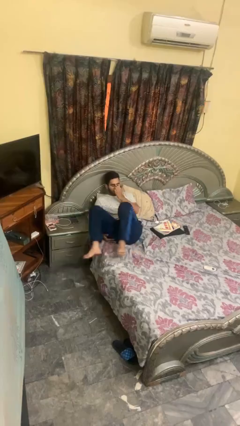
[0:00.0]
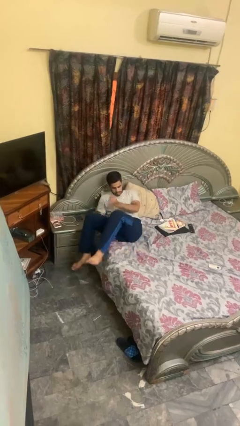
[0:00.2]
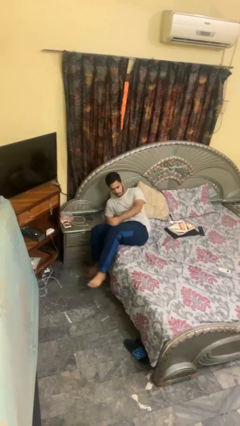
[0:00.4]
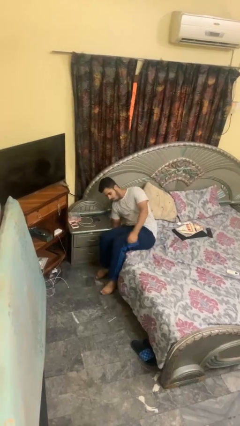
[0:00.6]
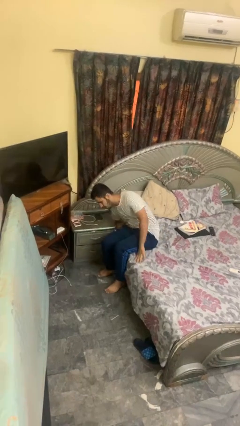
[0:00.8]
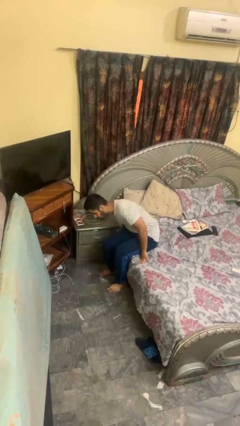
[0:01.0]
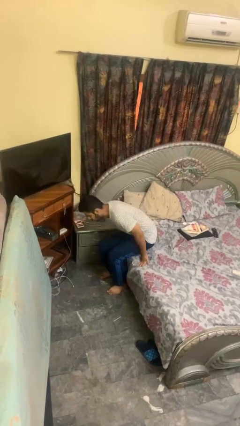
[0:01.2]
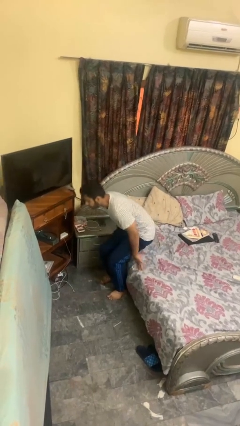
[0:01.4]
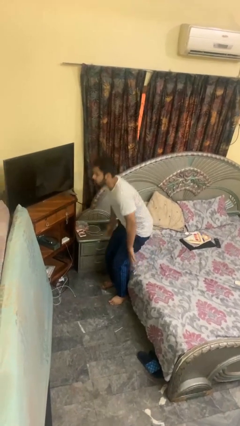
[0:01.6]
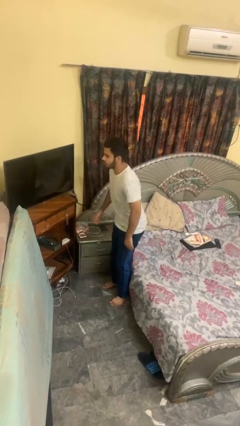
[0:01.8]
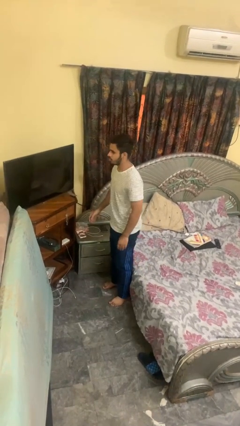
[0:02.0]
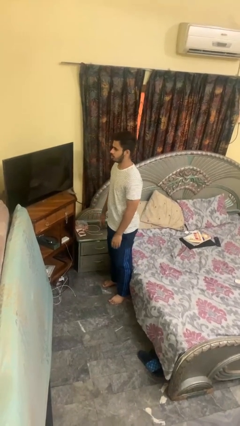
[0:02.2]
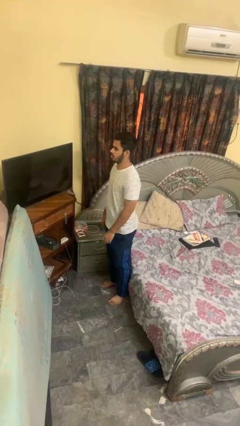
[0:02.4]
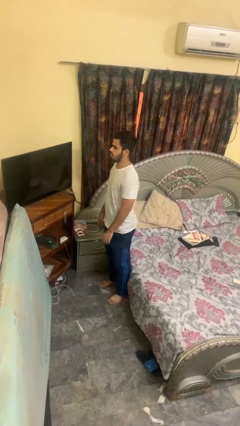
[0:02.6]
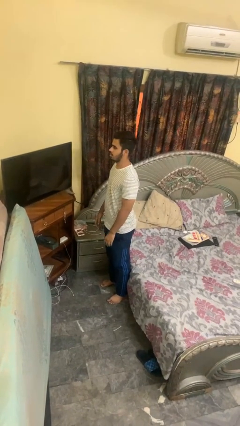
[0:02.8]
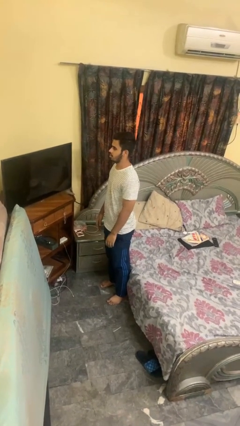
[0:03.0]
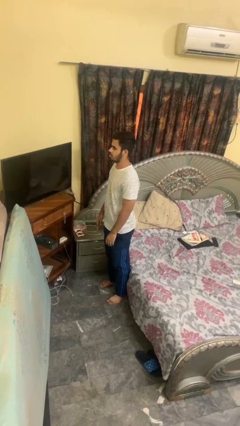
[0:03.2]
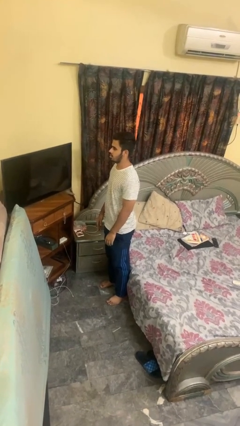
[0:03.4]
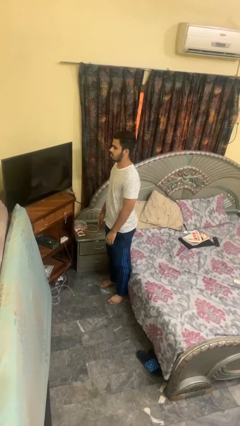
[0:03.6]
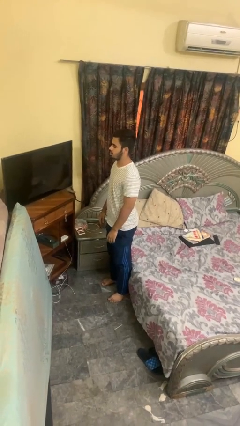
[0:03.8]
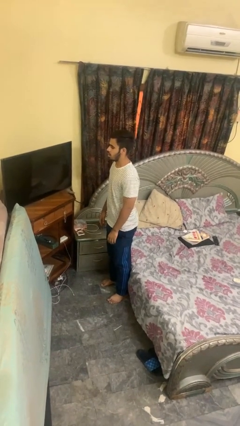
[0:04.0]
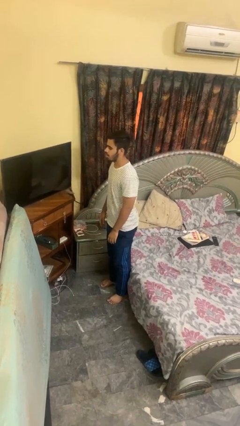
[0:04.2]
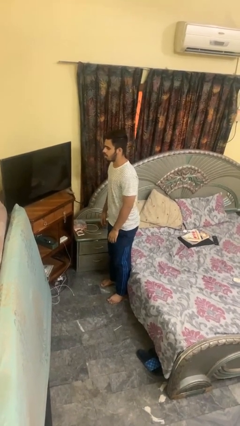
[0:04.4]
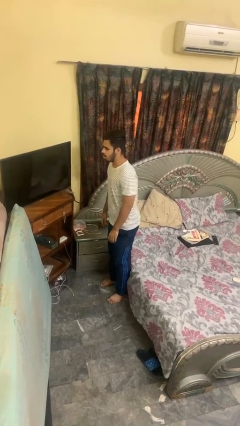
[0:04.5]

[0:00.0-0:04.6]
person stands up

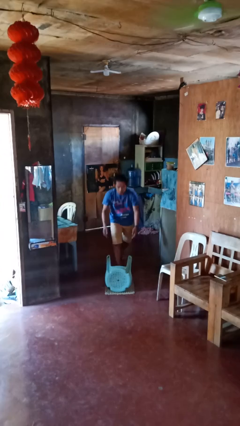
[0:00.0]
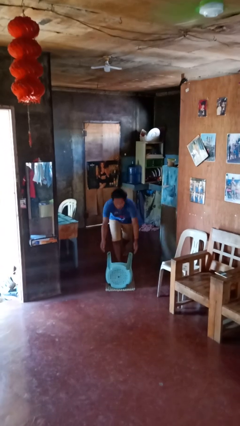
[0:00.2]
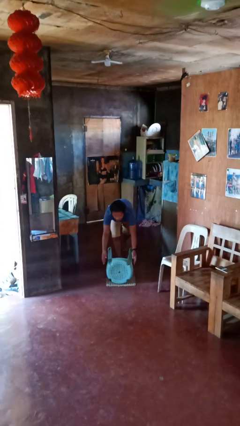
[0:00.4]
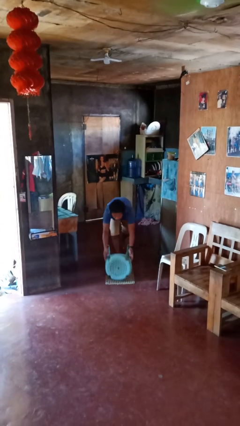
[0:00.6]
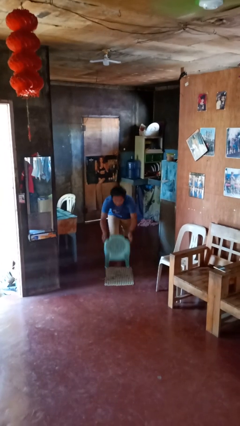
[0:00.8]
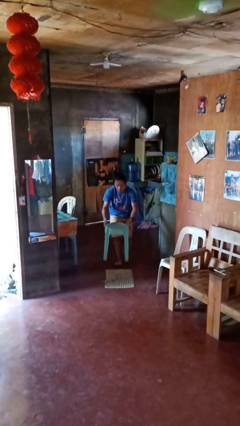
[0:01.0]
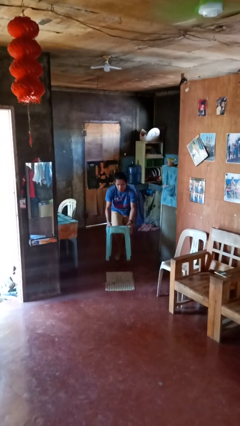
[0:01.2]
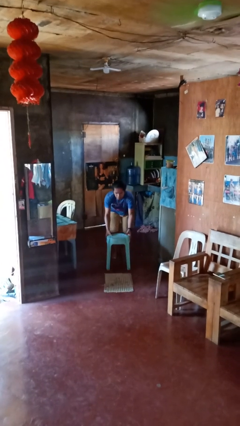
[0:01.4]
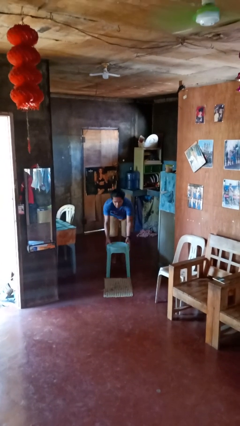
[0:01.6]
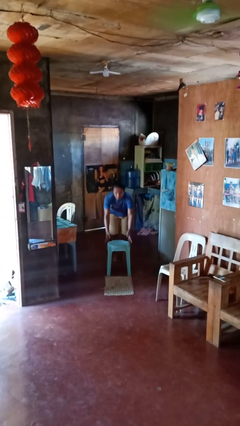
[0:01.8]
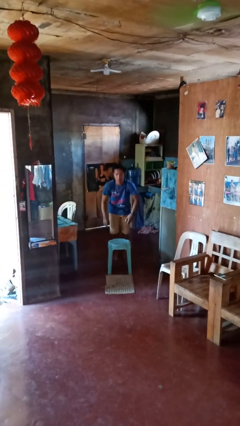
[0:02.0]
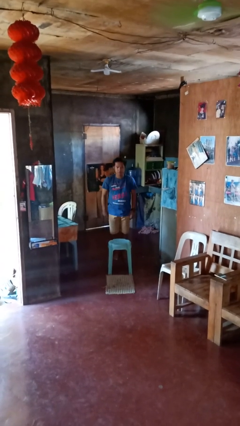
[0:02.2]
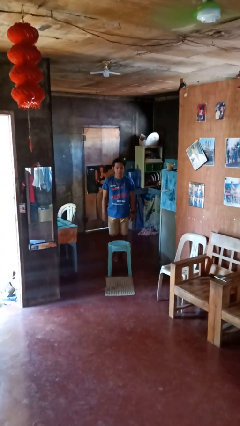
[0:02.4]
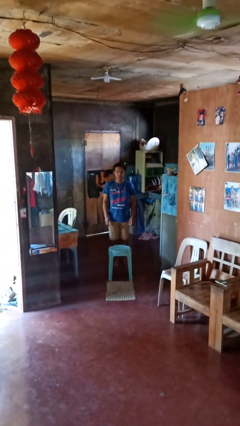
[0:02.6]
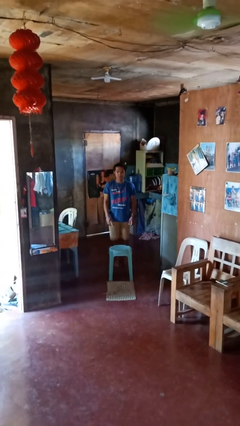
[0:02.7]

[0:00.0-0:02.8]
person sets upright furniture

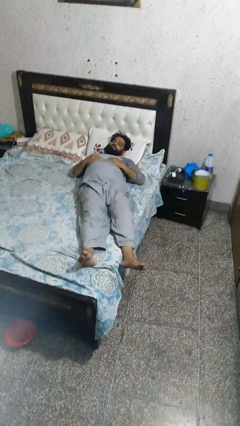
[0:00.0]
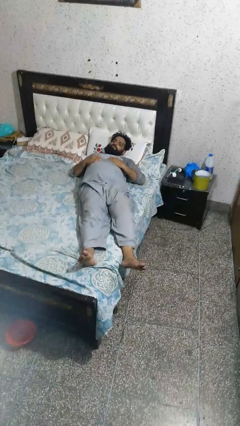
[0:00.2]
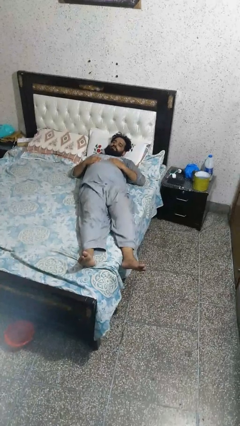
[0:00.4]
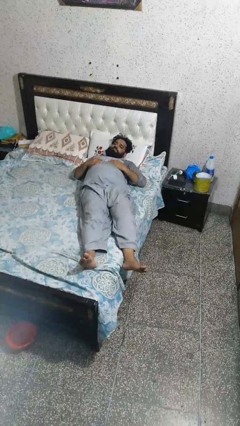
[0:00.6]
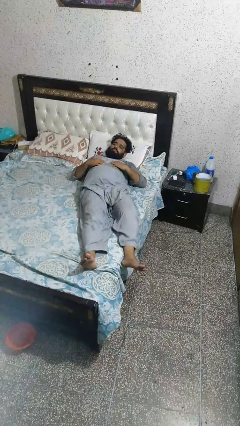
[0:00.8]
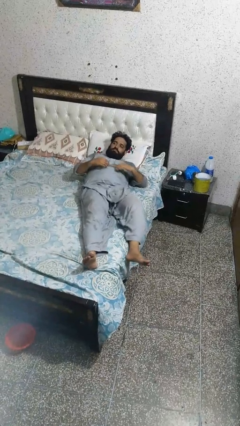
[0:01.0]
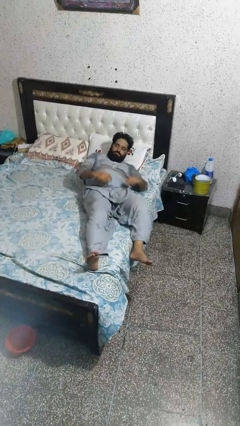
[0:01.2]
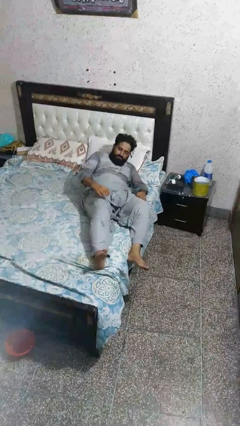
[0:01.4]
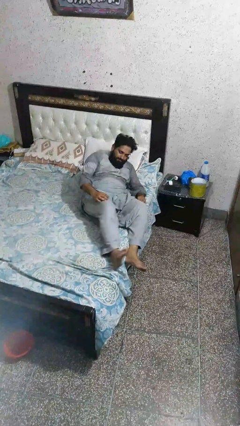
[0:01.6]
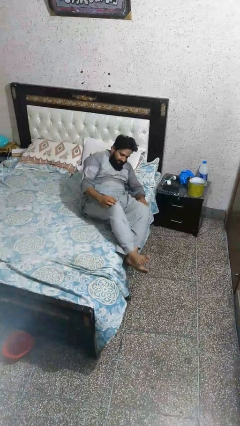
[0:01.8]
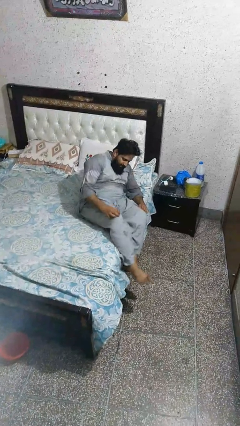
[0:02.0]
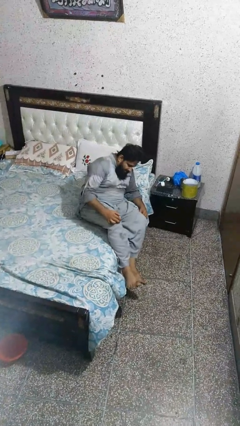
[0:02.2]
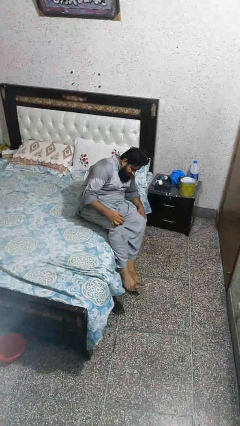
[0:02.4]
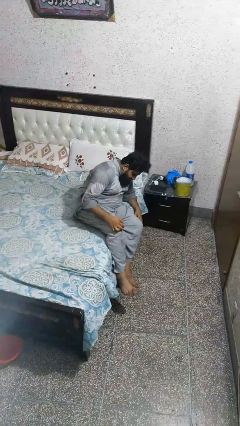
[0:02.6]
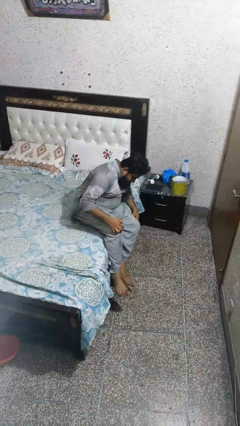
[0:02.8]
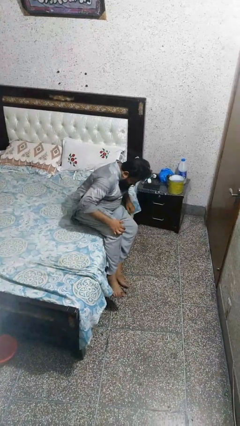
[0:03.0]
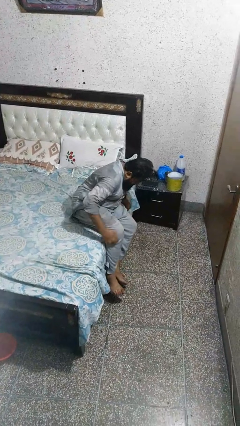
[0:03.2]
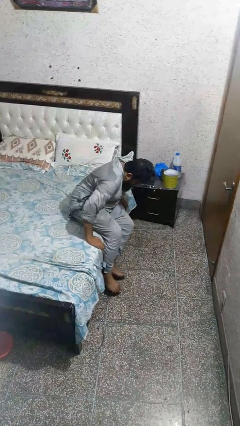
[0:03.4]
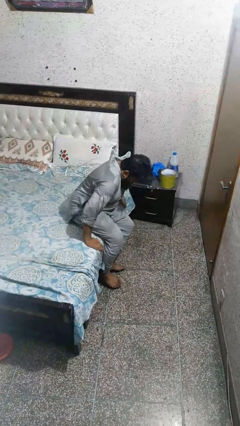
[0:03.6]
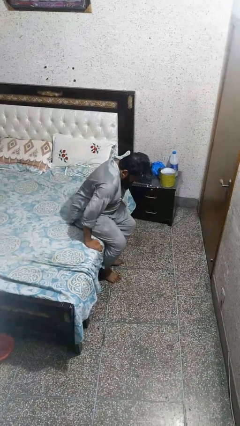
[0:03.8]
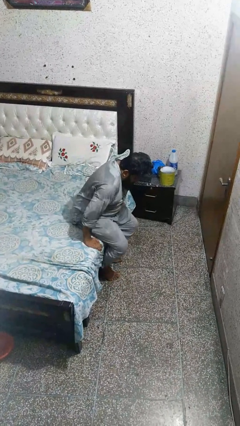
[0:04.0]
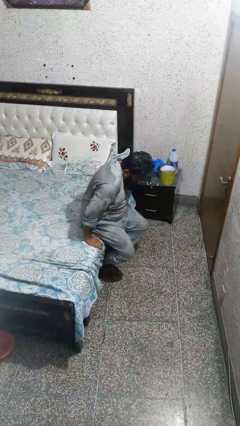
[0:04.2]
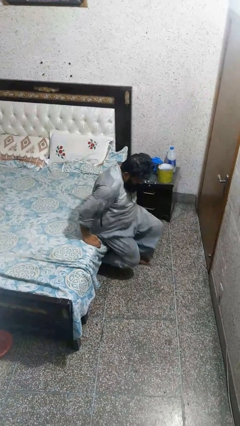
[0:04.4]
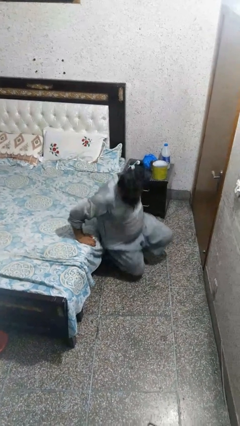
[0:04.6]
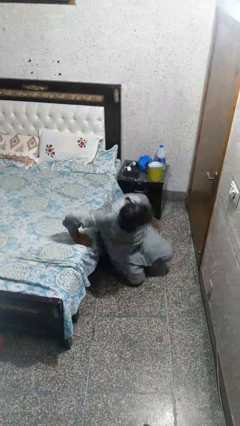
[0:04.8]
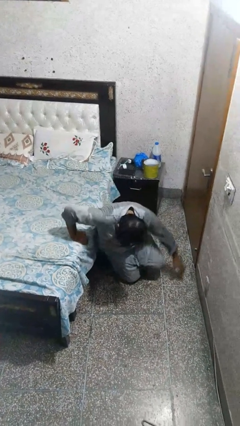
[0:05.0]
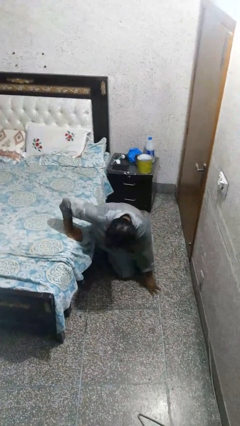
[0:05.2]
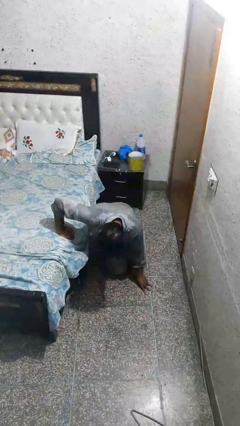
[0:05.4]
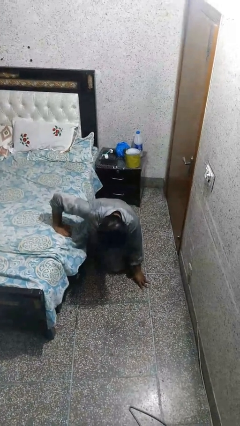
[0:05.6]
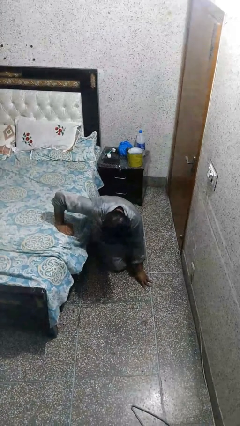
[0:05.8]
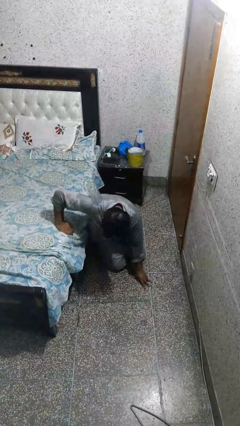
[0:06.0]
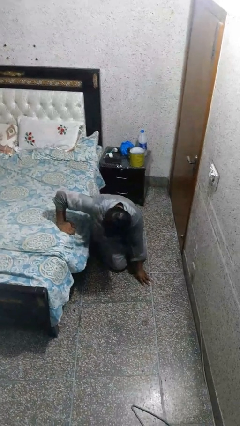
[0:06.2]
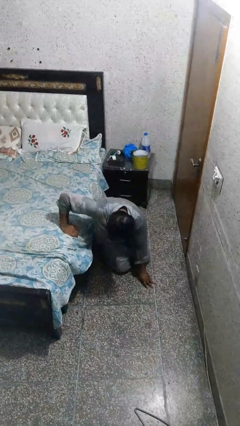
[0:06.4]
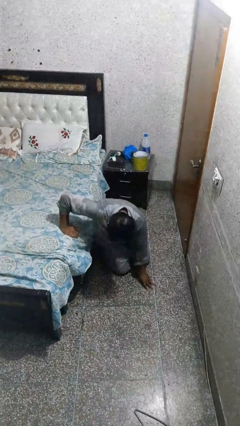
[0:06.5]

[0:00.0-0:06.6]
person falls from bed

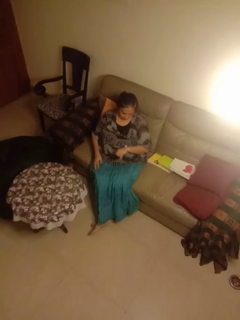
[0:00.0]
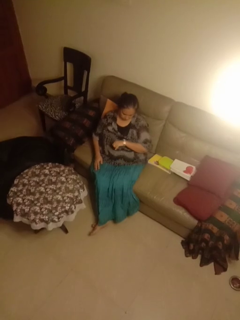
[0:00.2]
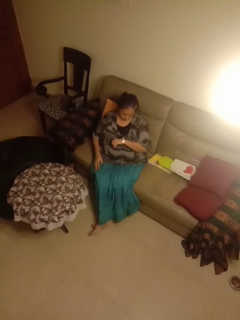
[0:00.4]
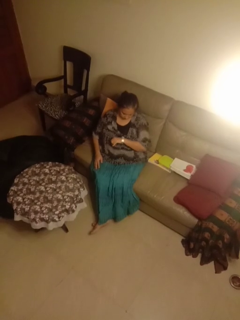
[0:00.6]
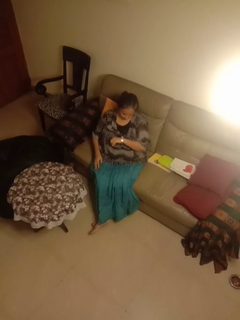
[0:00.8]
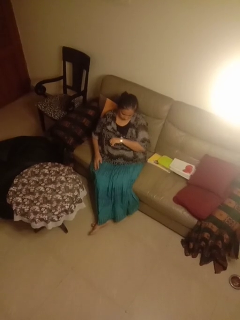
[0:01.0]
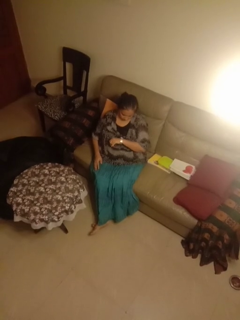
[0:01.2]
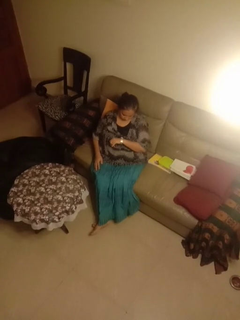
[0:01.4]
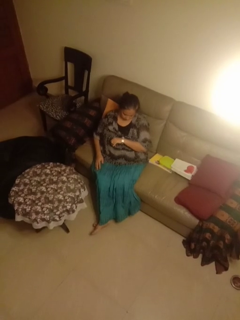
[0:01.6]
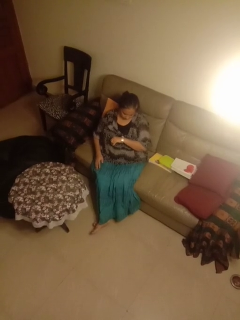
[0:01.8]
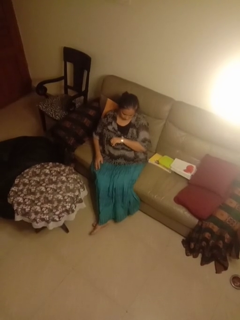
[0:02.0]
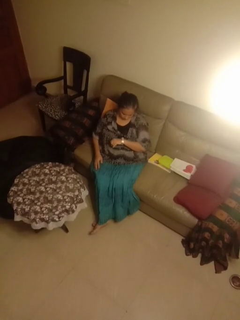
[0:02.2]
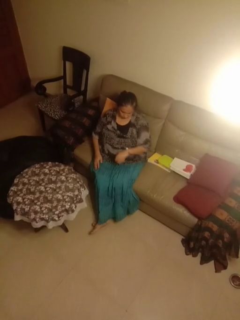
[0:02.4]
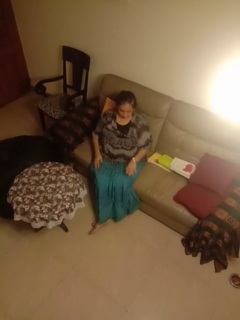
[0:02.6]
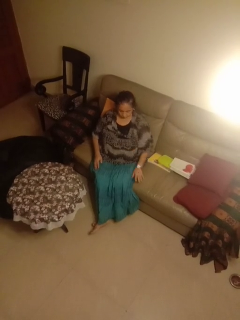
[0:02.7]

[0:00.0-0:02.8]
person looks at wristwatch

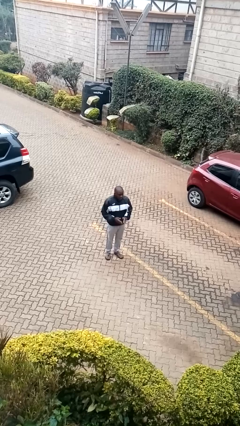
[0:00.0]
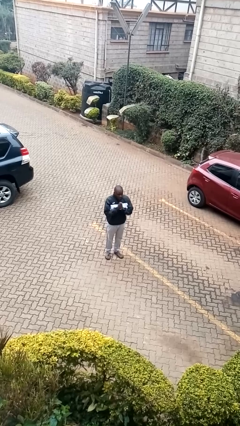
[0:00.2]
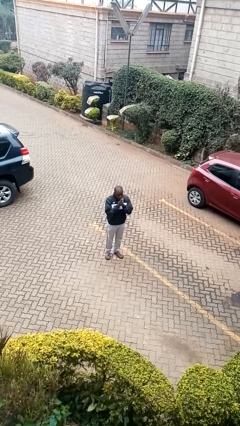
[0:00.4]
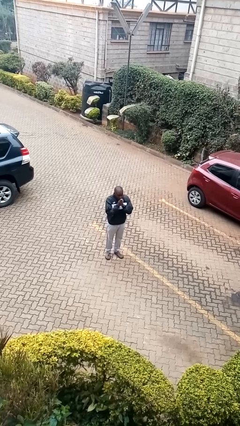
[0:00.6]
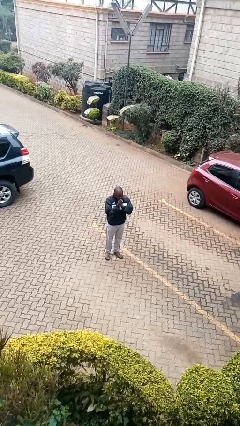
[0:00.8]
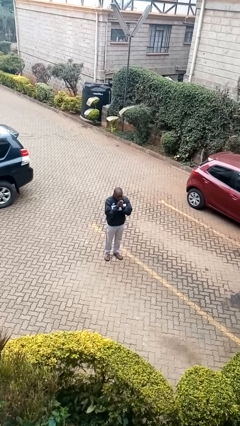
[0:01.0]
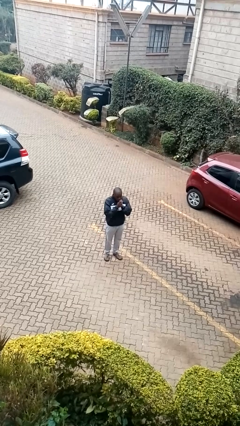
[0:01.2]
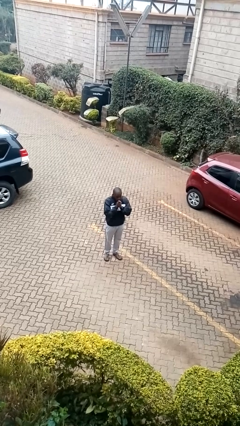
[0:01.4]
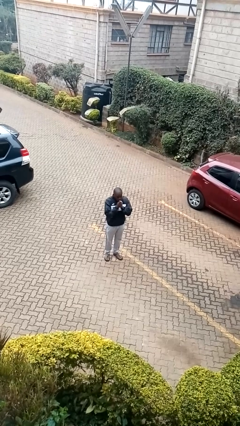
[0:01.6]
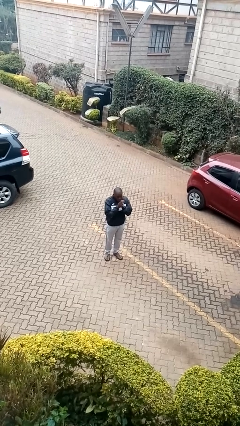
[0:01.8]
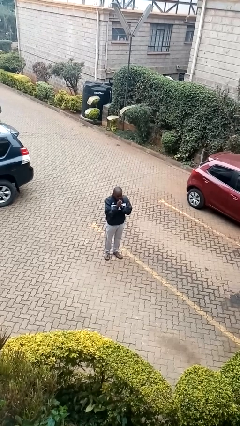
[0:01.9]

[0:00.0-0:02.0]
person blows into hands
